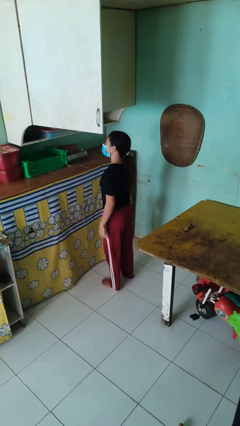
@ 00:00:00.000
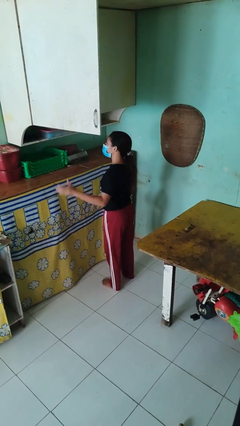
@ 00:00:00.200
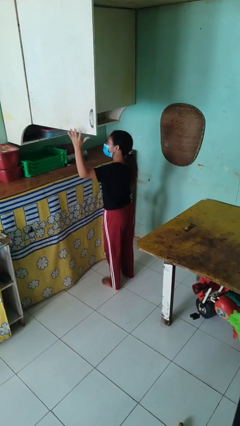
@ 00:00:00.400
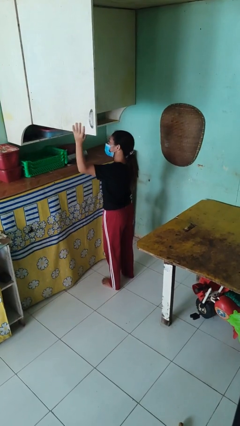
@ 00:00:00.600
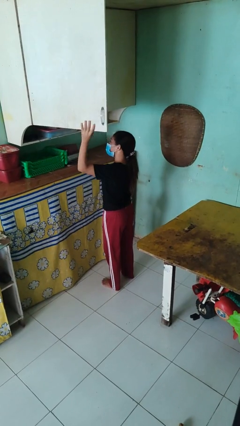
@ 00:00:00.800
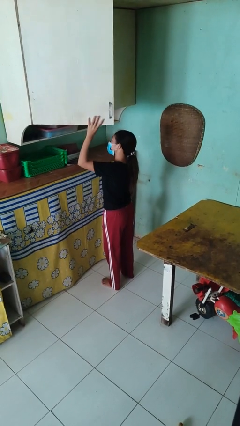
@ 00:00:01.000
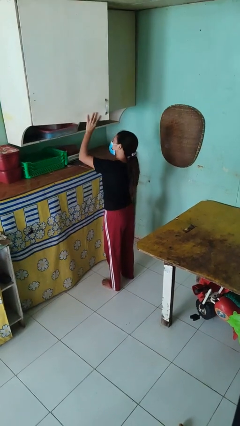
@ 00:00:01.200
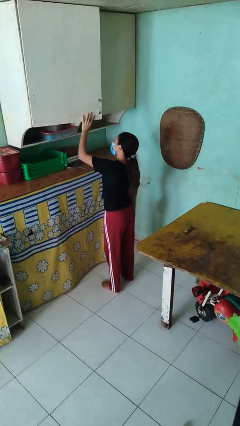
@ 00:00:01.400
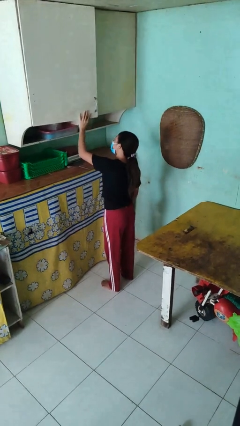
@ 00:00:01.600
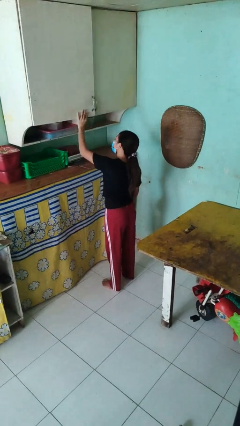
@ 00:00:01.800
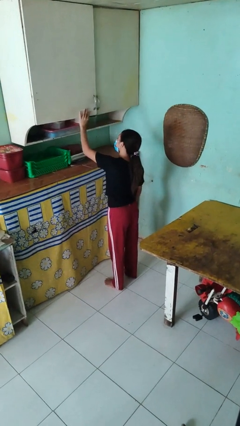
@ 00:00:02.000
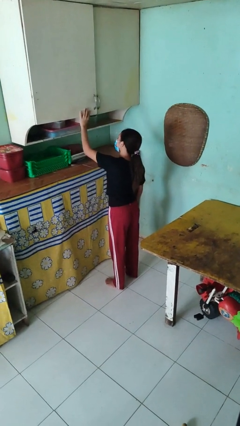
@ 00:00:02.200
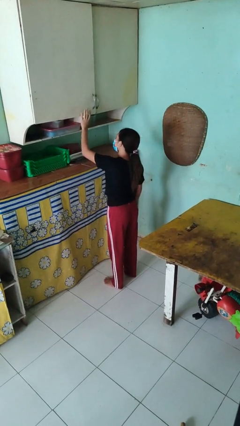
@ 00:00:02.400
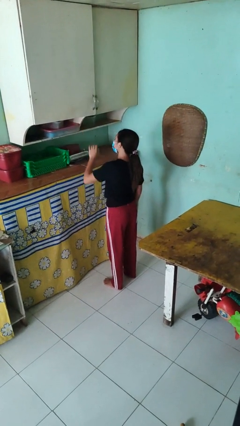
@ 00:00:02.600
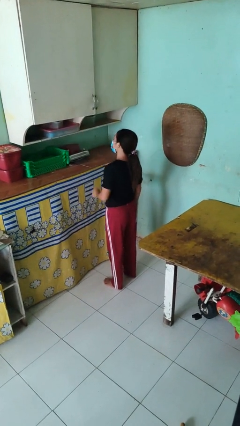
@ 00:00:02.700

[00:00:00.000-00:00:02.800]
person closes cabinet

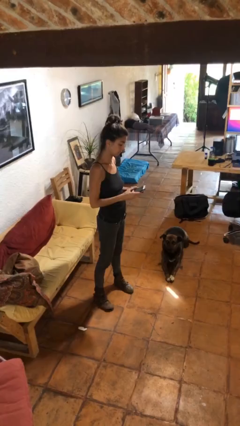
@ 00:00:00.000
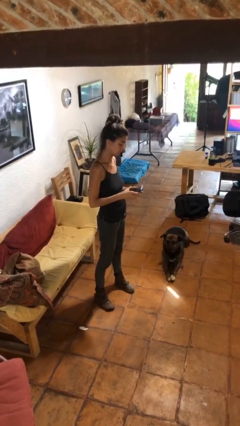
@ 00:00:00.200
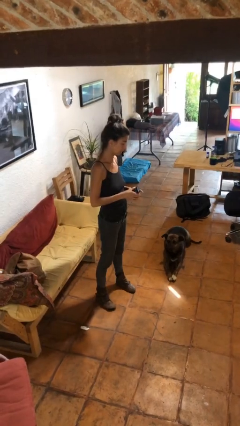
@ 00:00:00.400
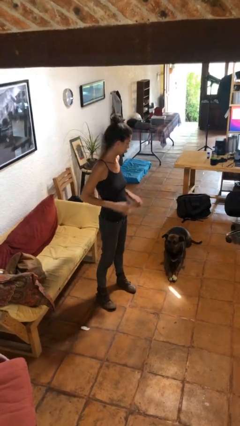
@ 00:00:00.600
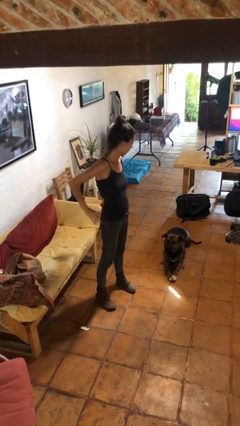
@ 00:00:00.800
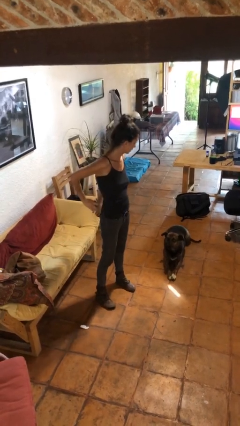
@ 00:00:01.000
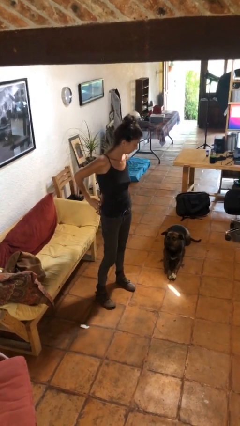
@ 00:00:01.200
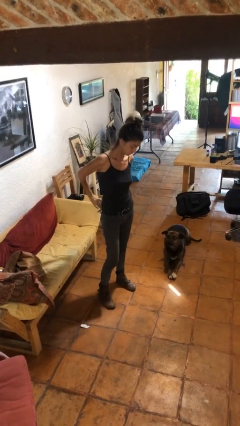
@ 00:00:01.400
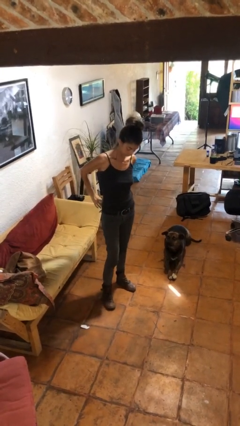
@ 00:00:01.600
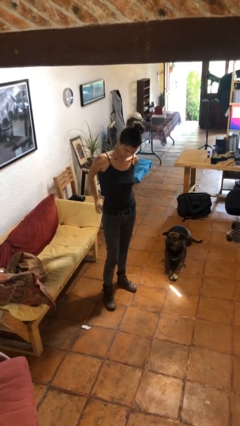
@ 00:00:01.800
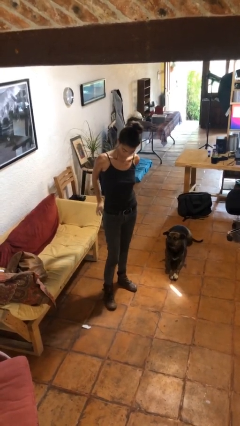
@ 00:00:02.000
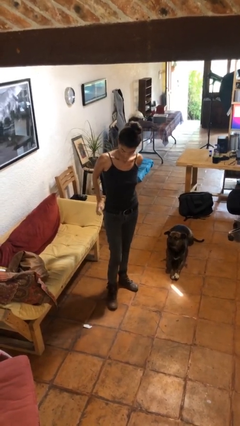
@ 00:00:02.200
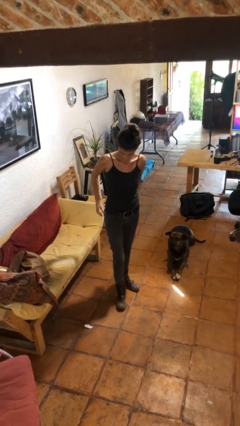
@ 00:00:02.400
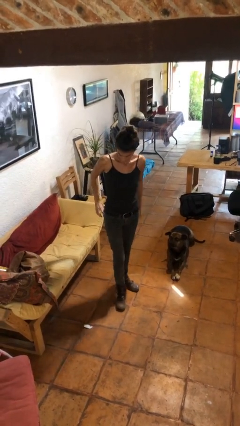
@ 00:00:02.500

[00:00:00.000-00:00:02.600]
person puts phone into pocket

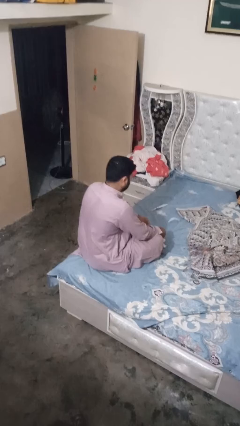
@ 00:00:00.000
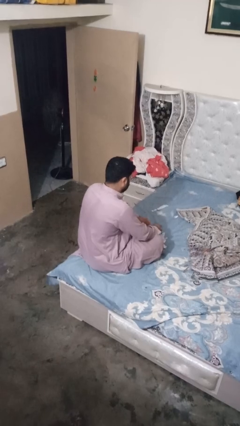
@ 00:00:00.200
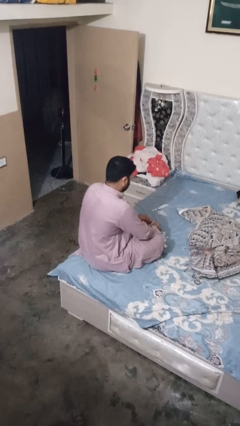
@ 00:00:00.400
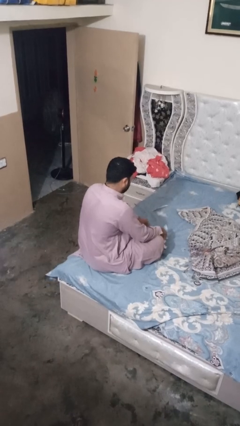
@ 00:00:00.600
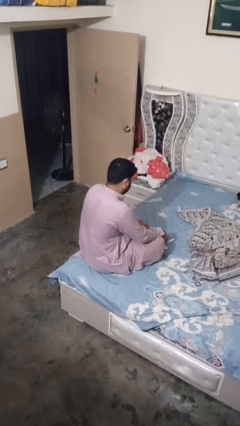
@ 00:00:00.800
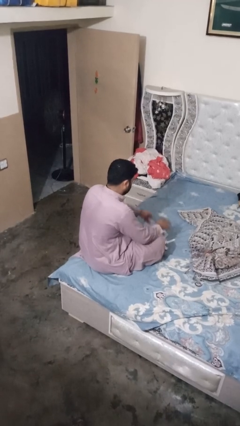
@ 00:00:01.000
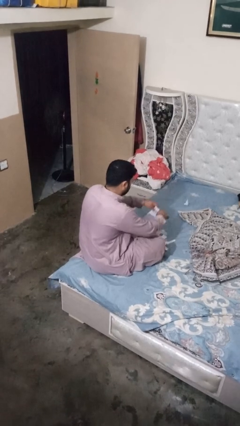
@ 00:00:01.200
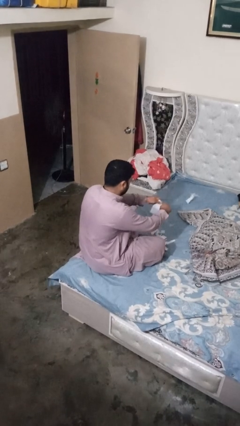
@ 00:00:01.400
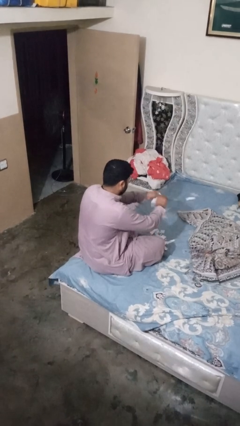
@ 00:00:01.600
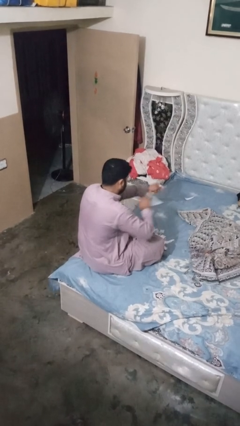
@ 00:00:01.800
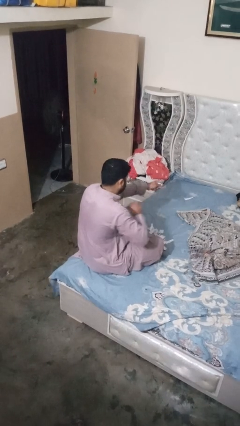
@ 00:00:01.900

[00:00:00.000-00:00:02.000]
person tears paper

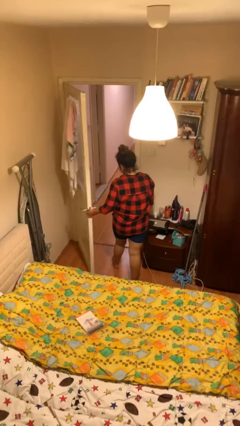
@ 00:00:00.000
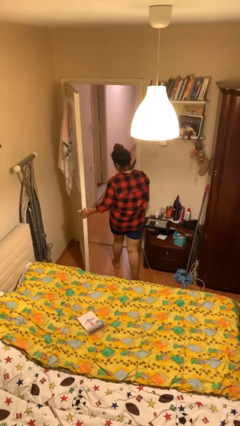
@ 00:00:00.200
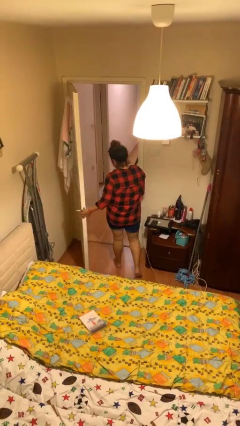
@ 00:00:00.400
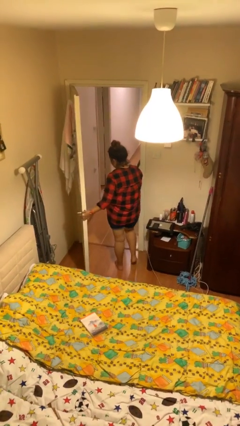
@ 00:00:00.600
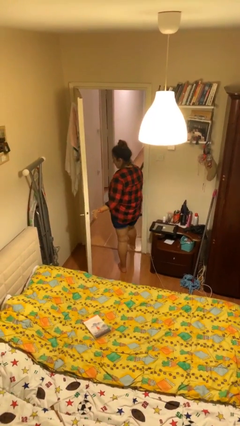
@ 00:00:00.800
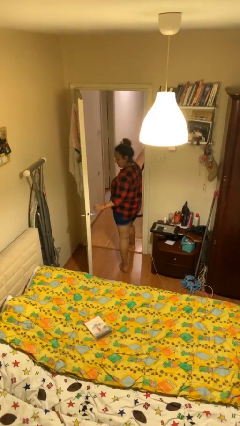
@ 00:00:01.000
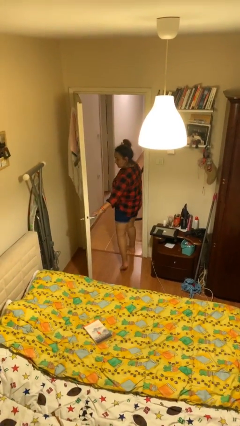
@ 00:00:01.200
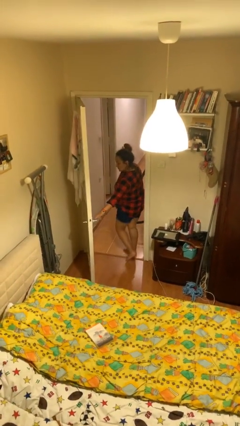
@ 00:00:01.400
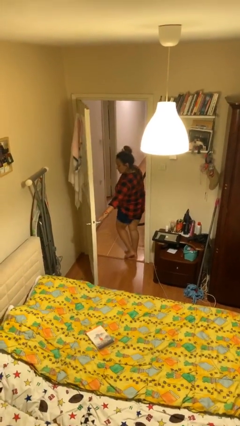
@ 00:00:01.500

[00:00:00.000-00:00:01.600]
person exits scene through structure

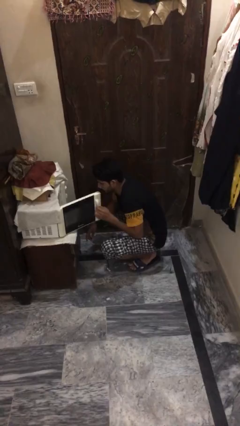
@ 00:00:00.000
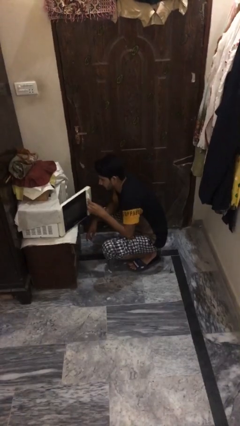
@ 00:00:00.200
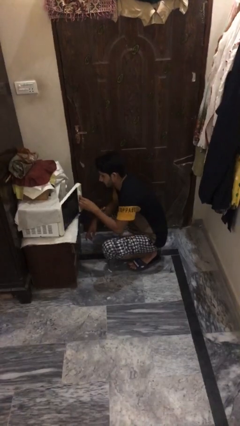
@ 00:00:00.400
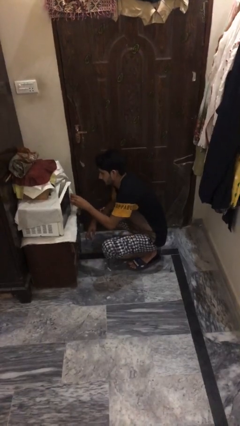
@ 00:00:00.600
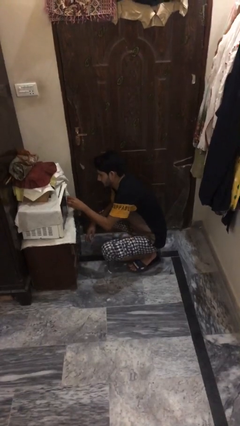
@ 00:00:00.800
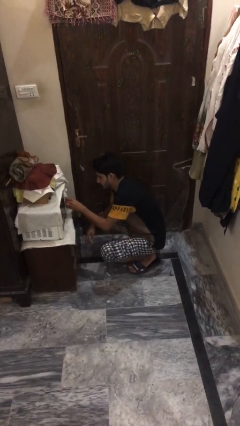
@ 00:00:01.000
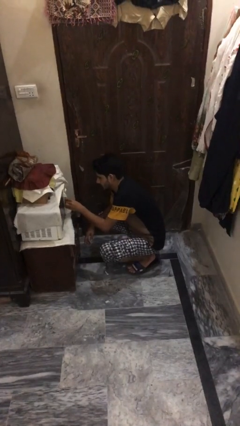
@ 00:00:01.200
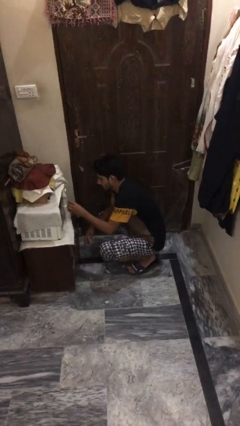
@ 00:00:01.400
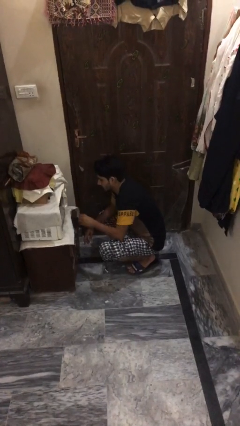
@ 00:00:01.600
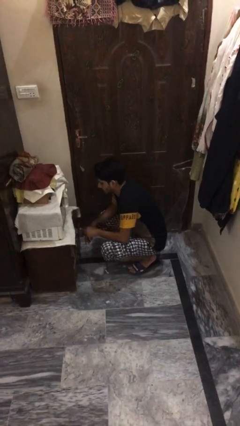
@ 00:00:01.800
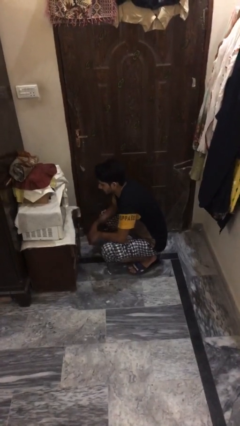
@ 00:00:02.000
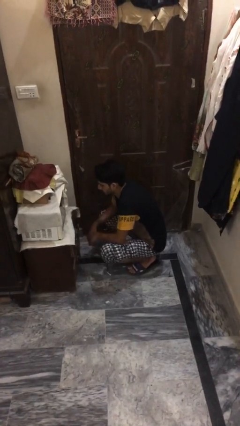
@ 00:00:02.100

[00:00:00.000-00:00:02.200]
person closes microwave

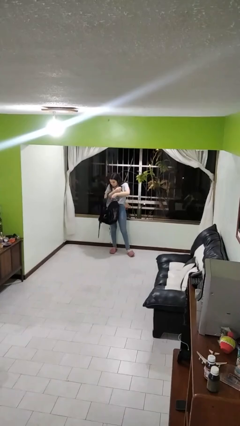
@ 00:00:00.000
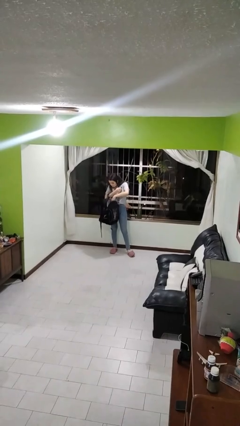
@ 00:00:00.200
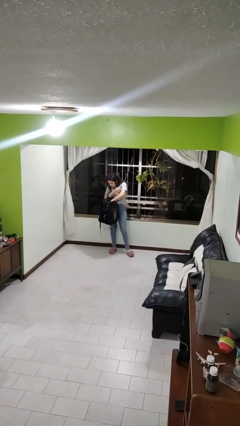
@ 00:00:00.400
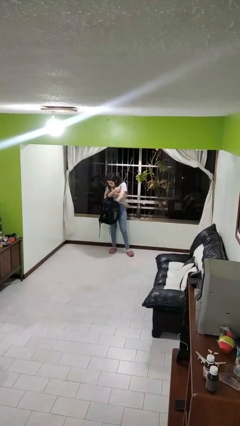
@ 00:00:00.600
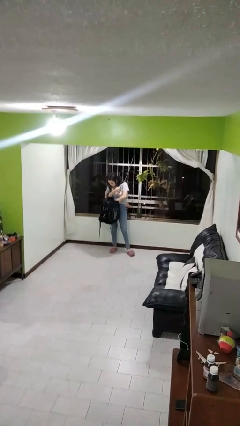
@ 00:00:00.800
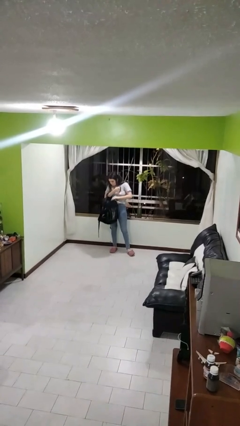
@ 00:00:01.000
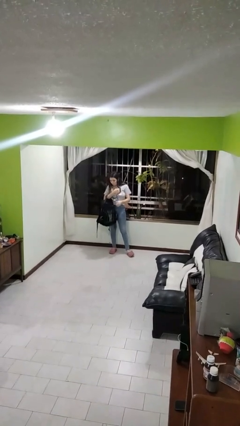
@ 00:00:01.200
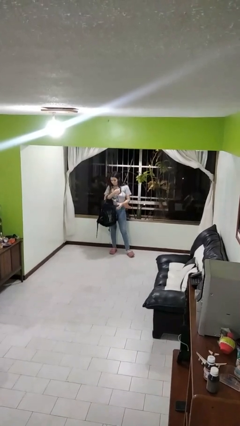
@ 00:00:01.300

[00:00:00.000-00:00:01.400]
person puts object into backpack

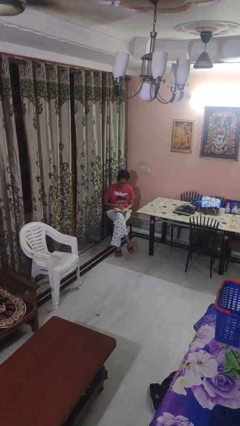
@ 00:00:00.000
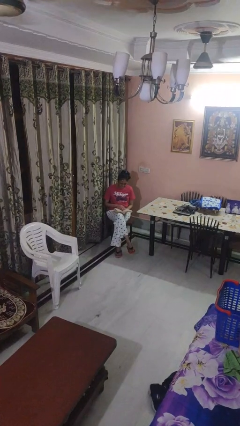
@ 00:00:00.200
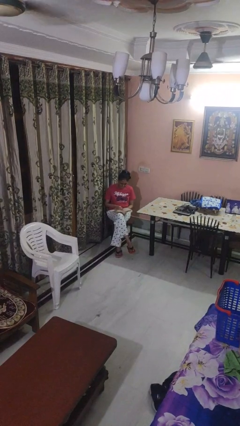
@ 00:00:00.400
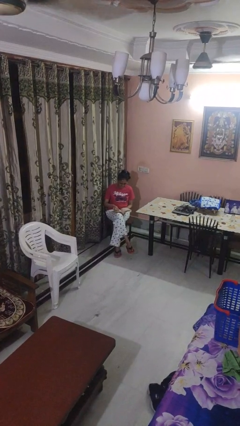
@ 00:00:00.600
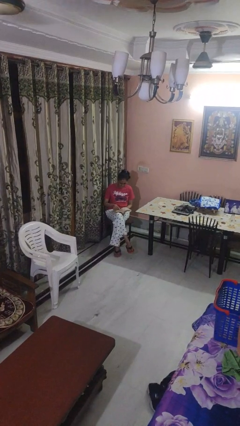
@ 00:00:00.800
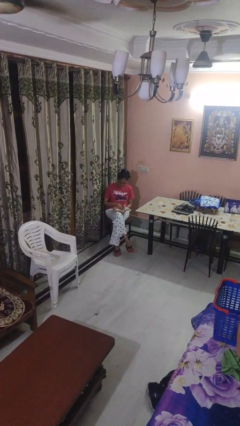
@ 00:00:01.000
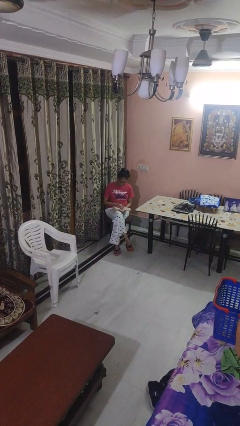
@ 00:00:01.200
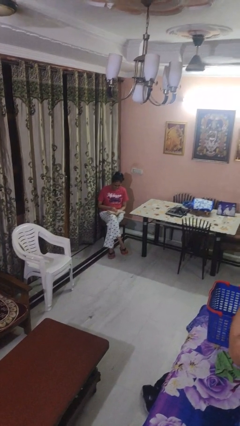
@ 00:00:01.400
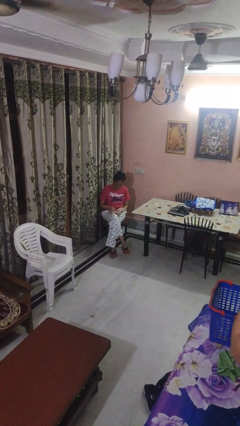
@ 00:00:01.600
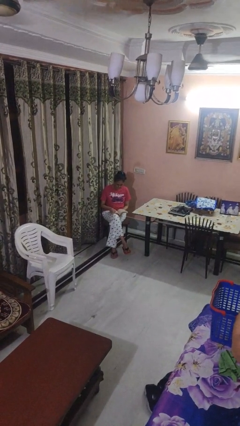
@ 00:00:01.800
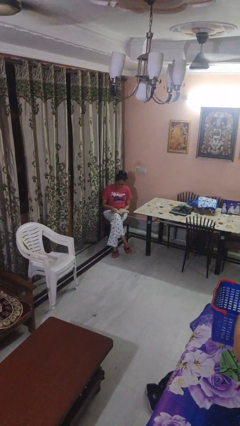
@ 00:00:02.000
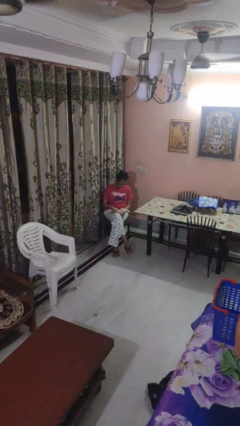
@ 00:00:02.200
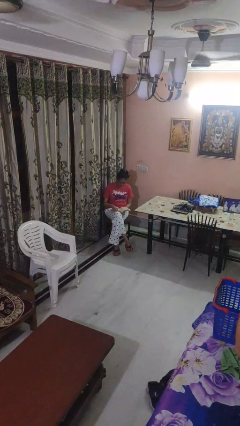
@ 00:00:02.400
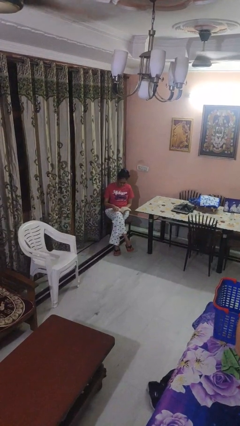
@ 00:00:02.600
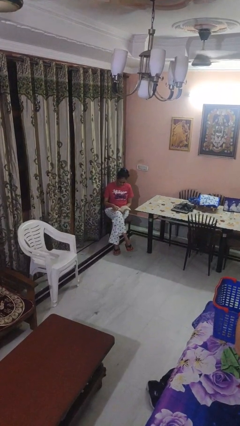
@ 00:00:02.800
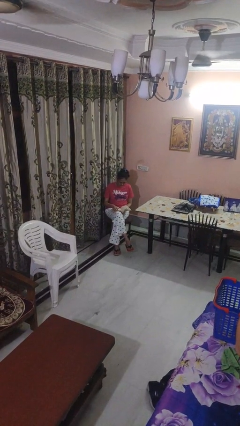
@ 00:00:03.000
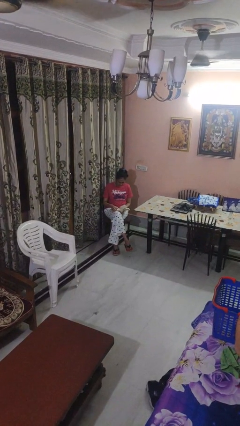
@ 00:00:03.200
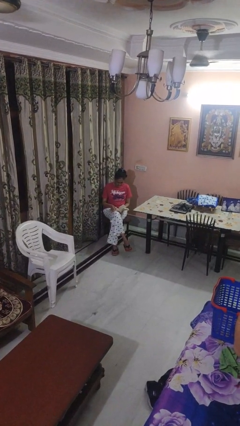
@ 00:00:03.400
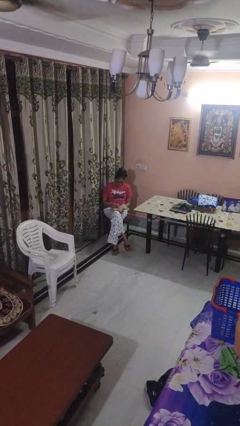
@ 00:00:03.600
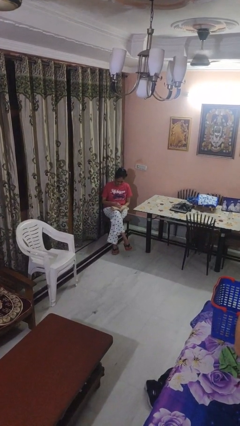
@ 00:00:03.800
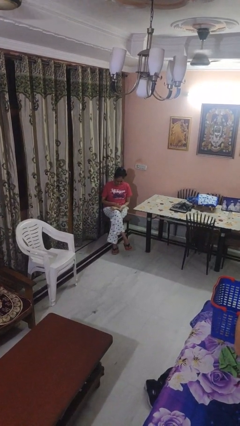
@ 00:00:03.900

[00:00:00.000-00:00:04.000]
person reads book
